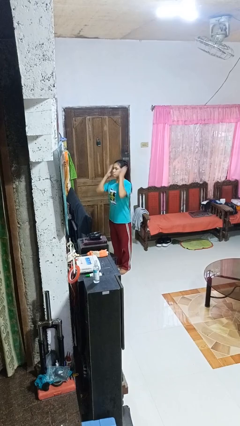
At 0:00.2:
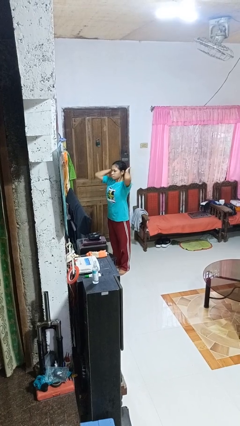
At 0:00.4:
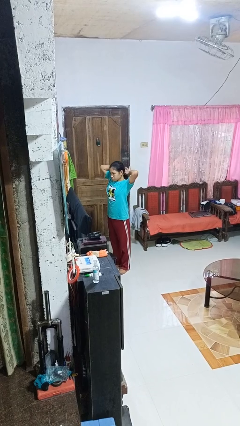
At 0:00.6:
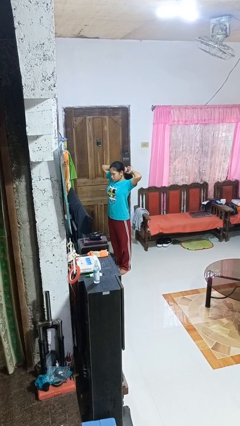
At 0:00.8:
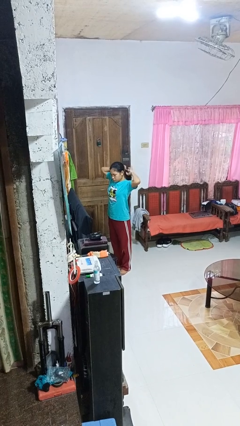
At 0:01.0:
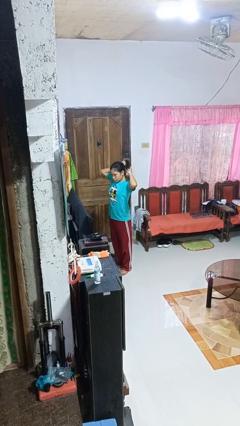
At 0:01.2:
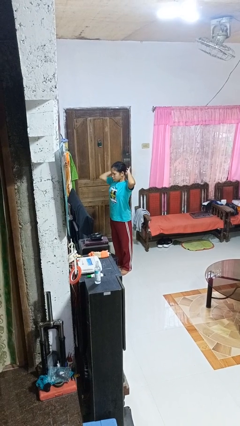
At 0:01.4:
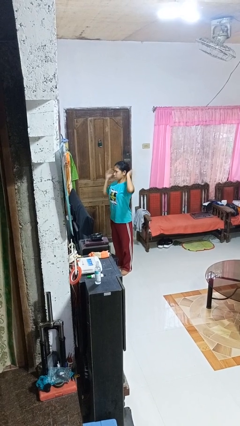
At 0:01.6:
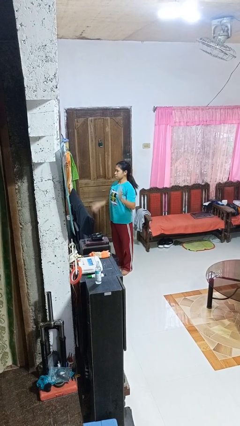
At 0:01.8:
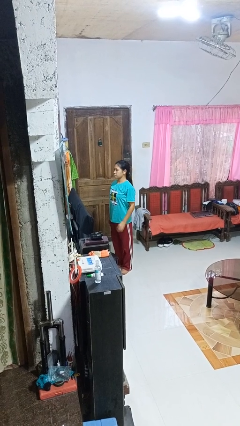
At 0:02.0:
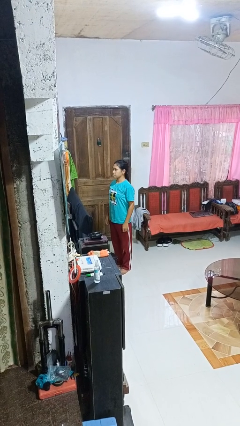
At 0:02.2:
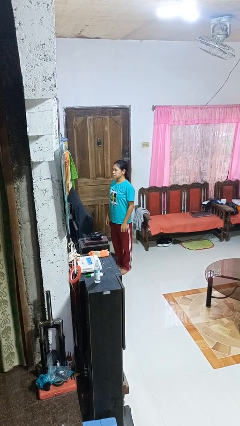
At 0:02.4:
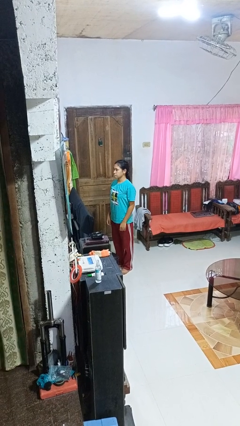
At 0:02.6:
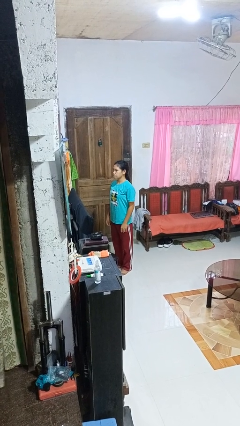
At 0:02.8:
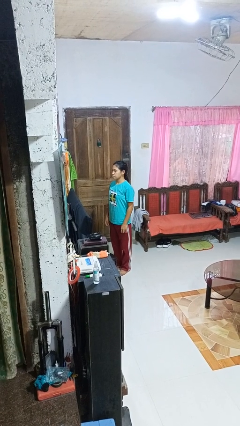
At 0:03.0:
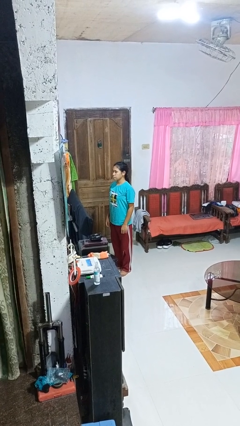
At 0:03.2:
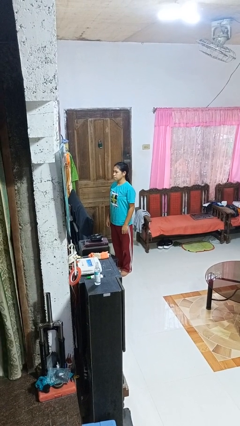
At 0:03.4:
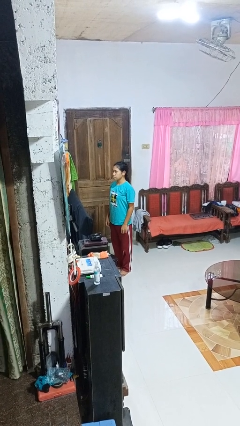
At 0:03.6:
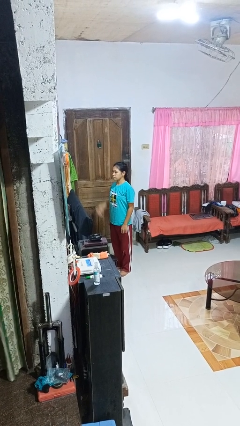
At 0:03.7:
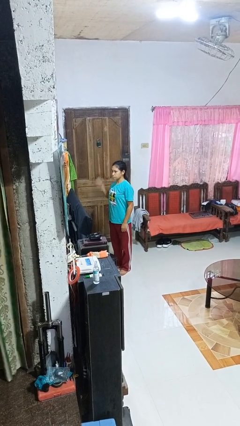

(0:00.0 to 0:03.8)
person puts hair in ponytail

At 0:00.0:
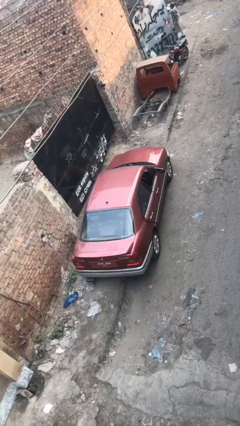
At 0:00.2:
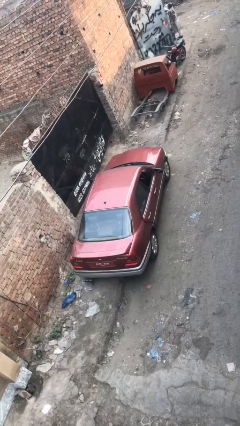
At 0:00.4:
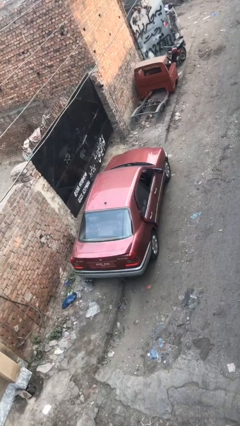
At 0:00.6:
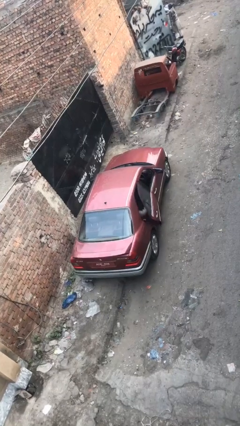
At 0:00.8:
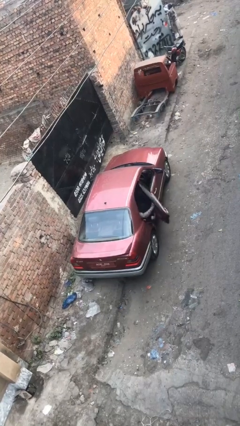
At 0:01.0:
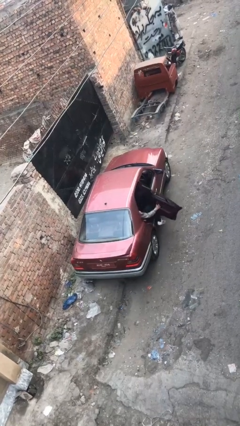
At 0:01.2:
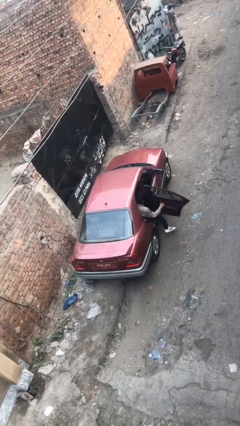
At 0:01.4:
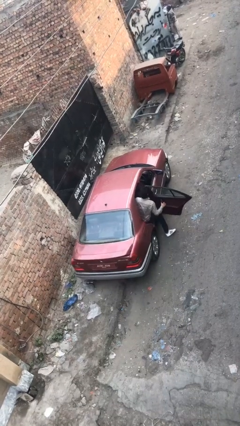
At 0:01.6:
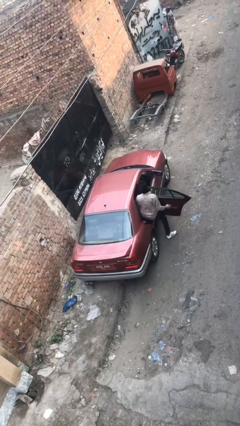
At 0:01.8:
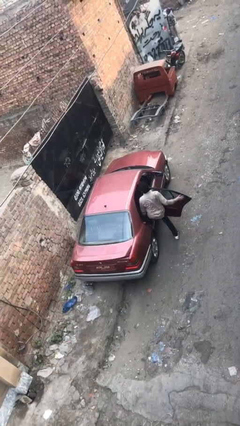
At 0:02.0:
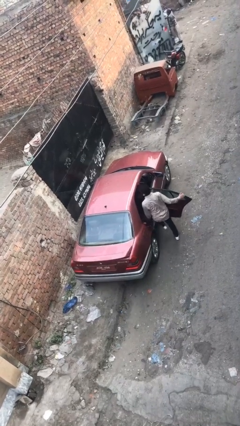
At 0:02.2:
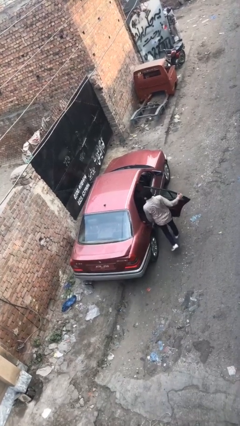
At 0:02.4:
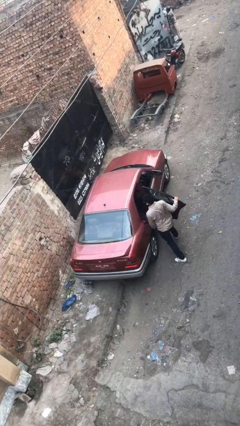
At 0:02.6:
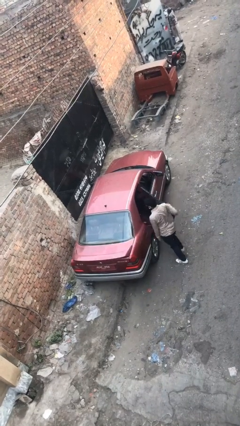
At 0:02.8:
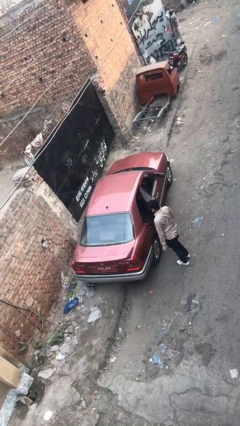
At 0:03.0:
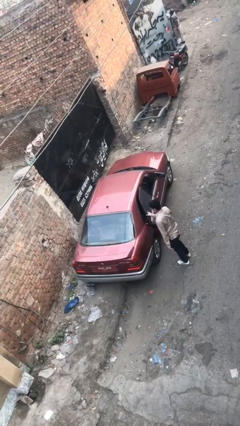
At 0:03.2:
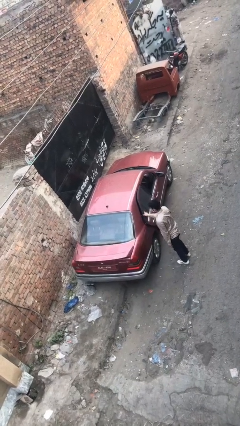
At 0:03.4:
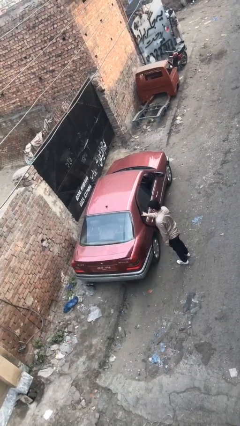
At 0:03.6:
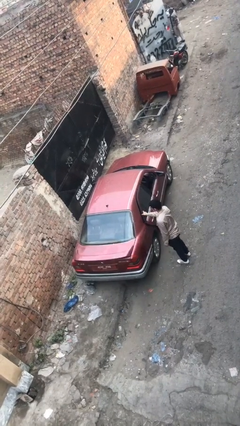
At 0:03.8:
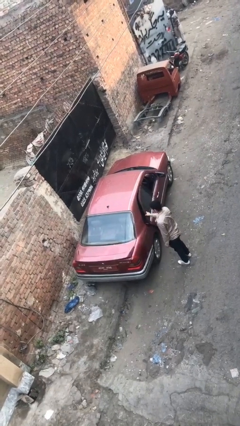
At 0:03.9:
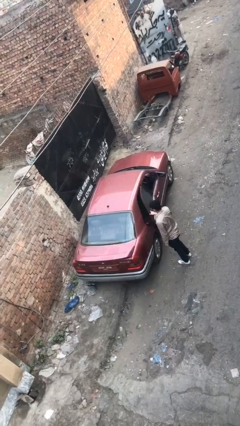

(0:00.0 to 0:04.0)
car drops off person

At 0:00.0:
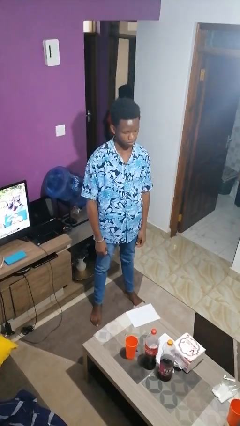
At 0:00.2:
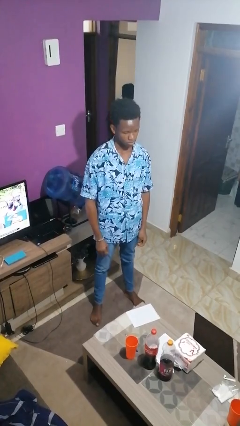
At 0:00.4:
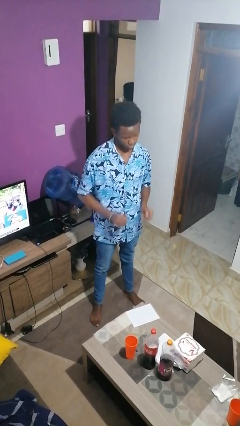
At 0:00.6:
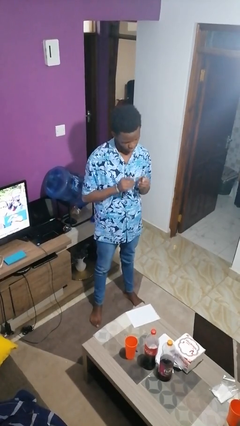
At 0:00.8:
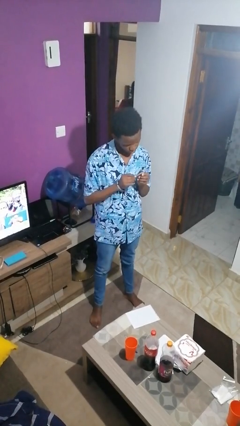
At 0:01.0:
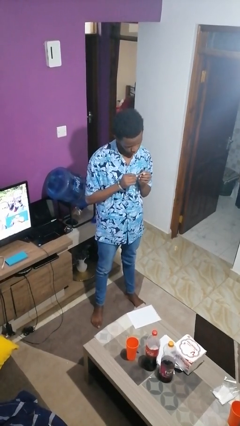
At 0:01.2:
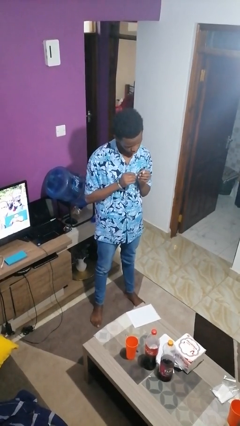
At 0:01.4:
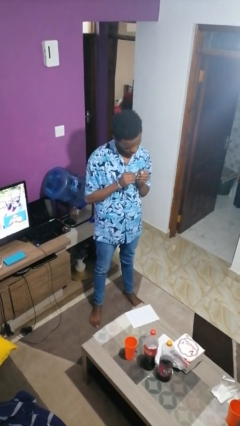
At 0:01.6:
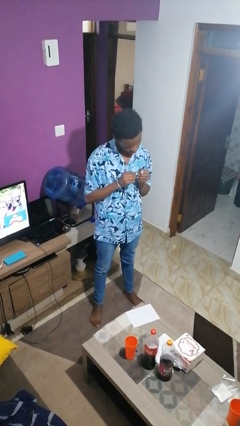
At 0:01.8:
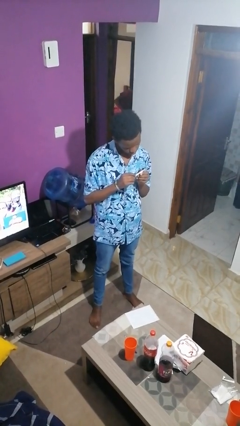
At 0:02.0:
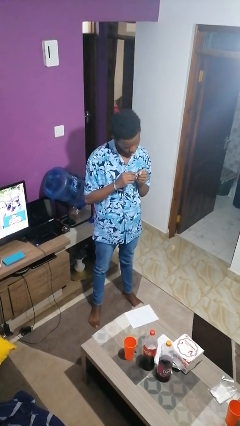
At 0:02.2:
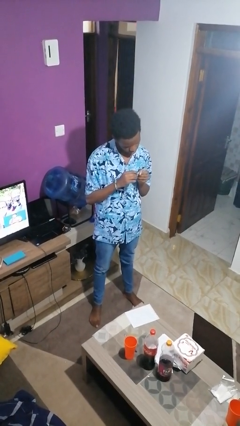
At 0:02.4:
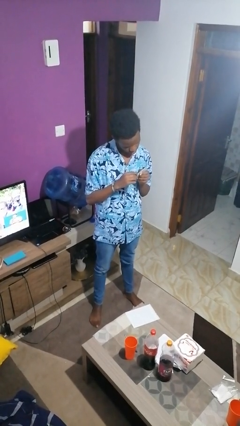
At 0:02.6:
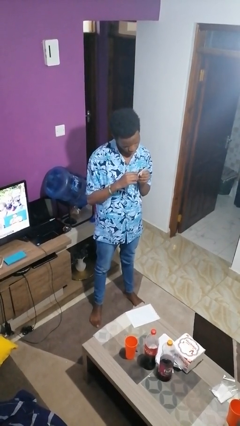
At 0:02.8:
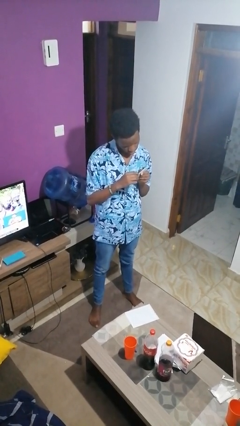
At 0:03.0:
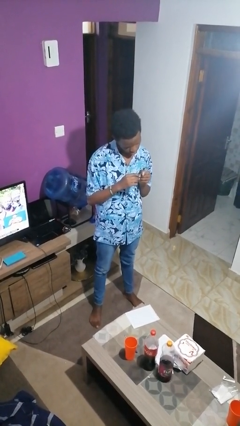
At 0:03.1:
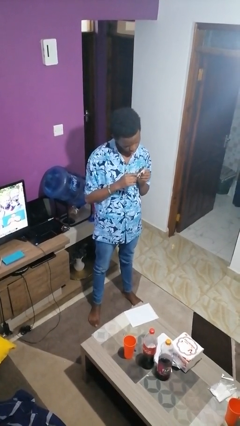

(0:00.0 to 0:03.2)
person files fingernails

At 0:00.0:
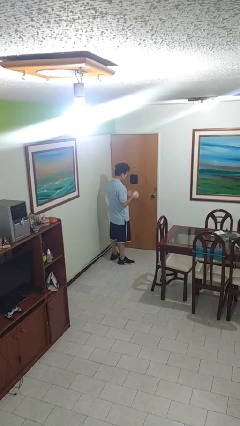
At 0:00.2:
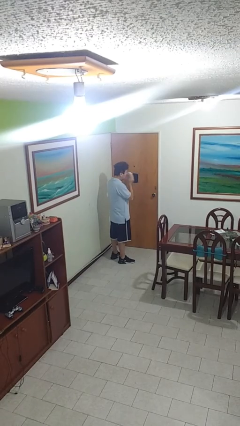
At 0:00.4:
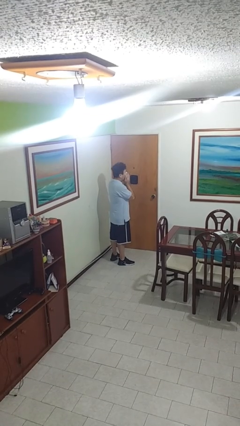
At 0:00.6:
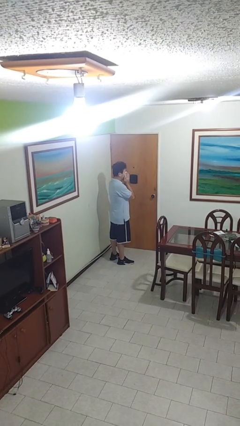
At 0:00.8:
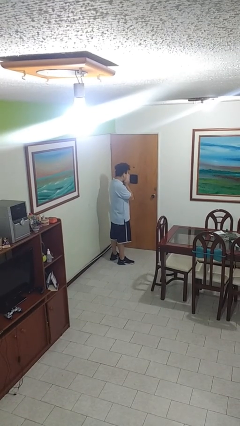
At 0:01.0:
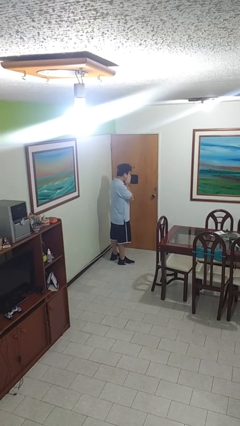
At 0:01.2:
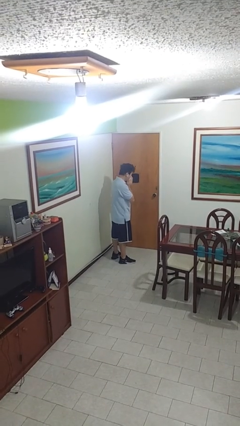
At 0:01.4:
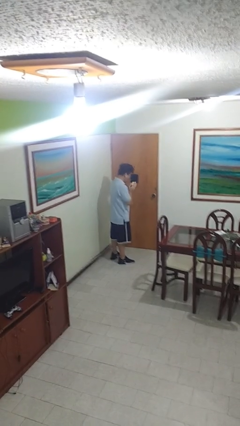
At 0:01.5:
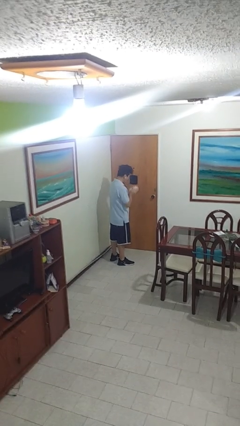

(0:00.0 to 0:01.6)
person blows nose

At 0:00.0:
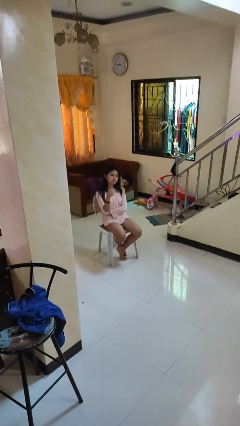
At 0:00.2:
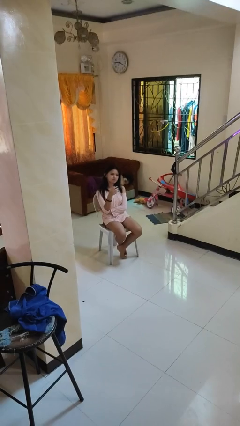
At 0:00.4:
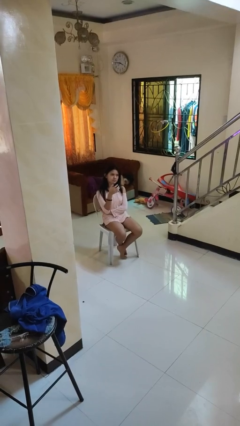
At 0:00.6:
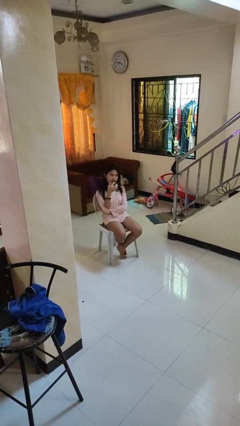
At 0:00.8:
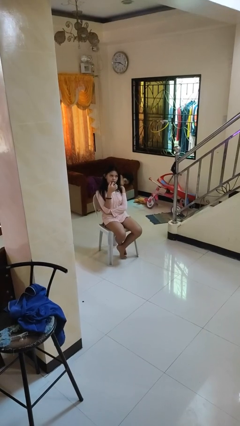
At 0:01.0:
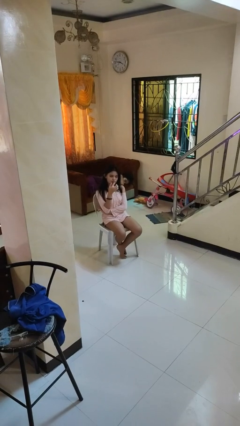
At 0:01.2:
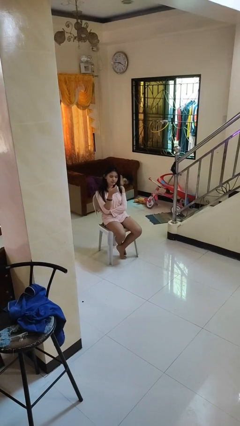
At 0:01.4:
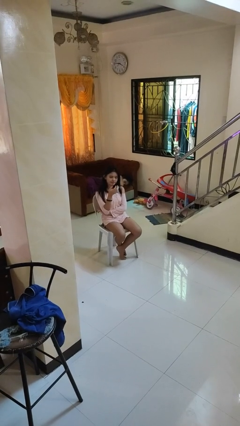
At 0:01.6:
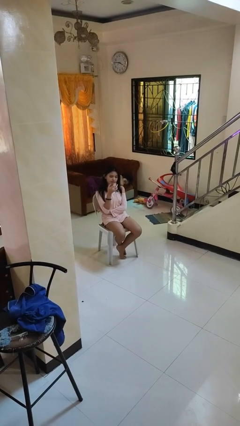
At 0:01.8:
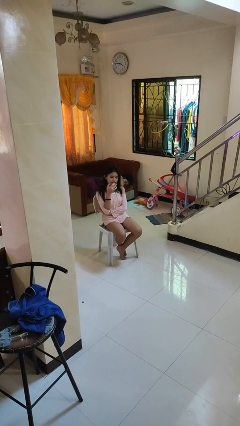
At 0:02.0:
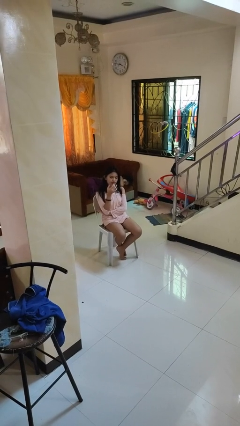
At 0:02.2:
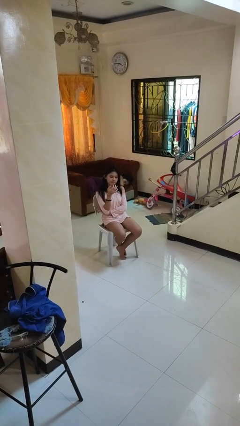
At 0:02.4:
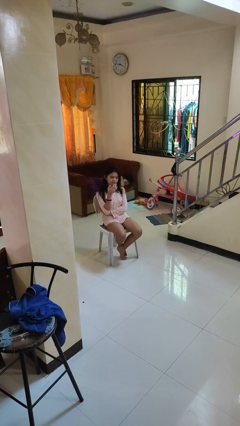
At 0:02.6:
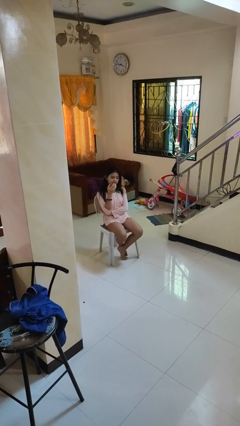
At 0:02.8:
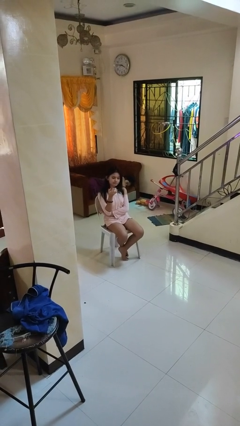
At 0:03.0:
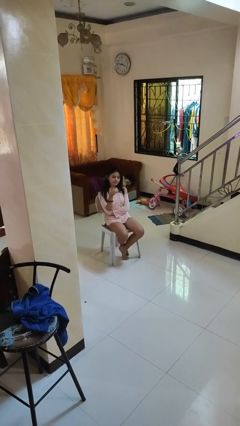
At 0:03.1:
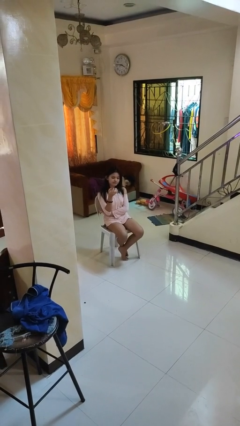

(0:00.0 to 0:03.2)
person licks fingers

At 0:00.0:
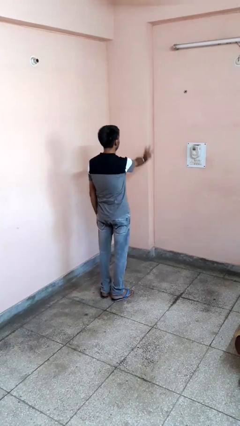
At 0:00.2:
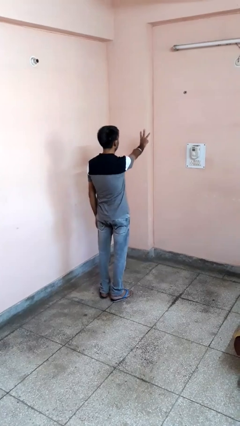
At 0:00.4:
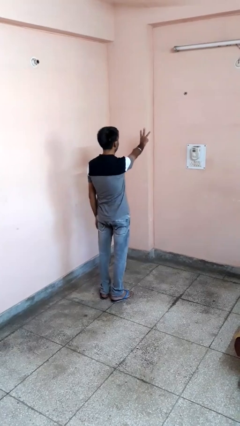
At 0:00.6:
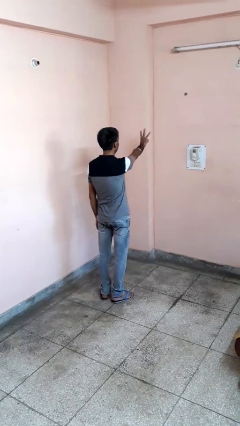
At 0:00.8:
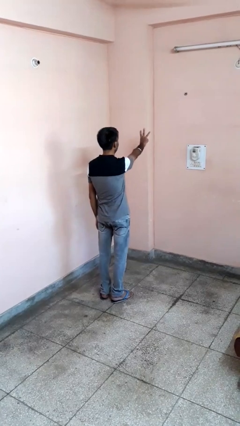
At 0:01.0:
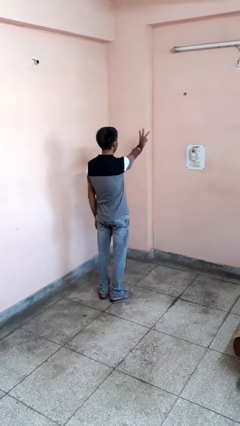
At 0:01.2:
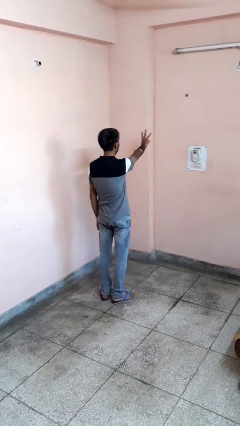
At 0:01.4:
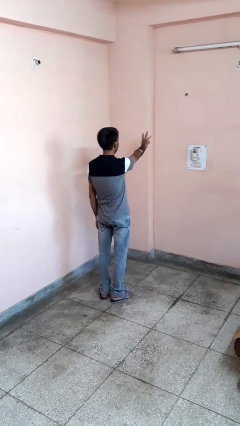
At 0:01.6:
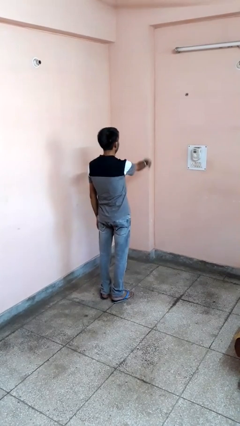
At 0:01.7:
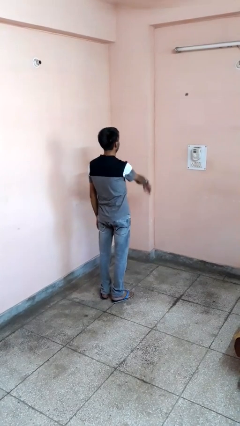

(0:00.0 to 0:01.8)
person gestures number three
